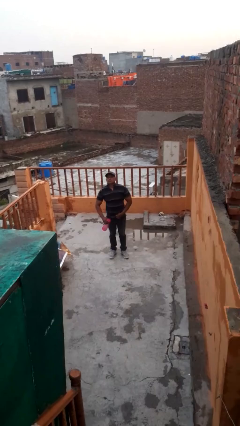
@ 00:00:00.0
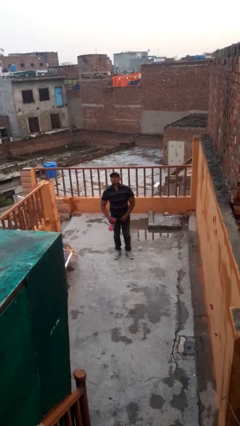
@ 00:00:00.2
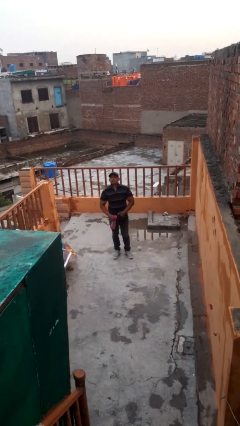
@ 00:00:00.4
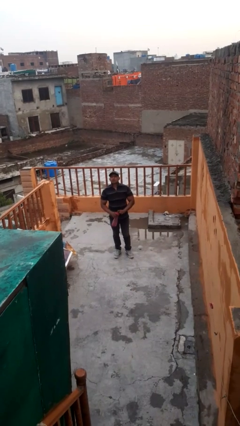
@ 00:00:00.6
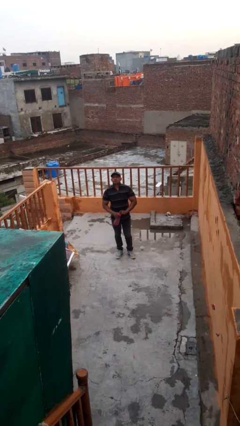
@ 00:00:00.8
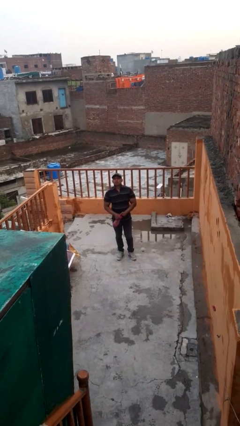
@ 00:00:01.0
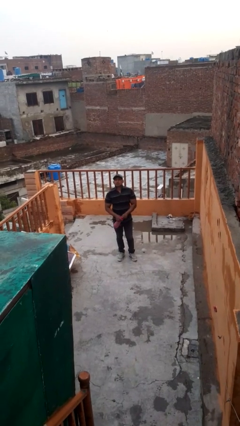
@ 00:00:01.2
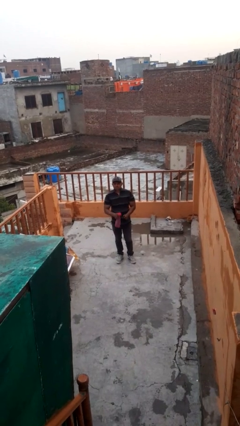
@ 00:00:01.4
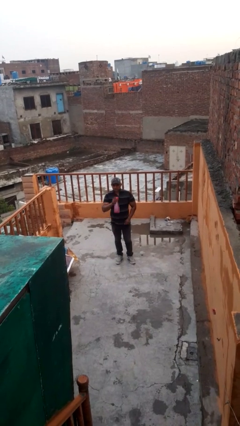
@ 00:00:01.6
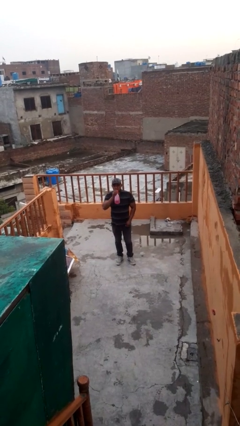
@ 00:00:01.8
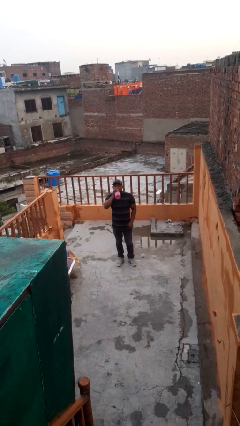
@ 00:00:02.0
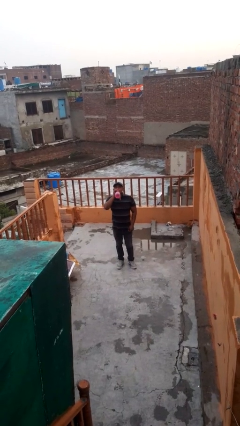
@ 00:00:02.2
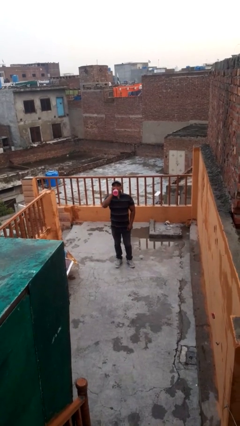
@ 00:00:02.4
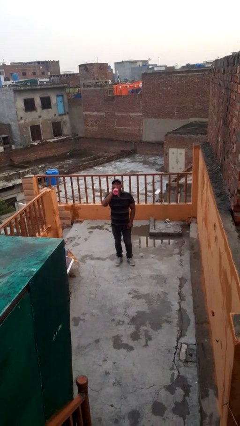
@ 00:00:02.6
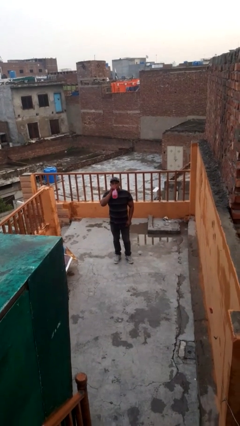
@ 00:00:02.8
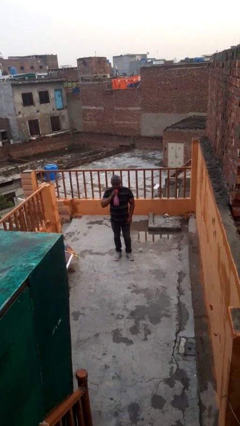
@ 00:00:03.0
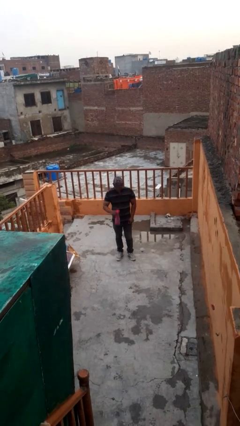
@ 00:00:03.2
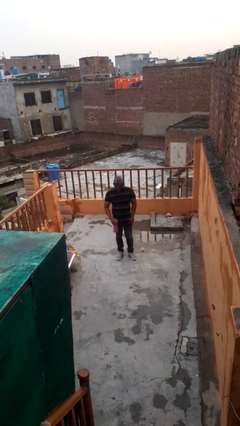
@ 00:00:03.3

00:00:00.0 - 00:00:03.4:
person drinks from bottle

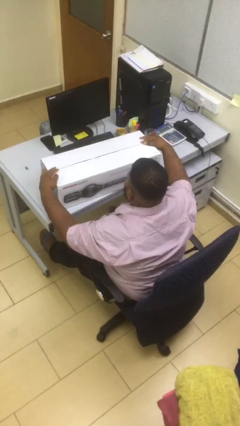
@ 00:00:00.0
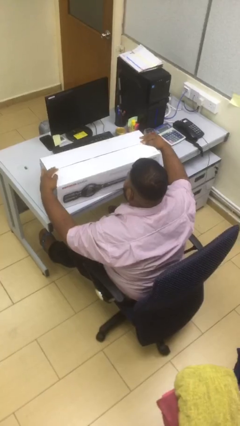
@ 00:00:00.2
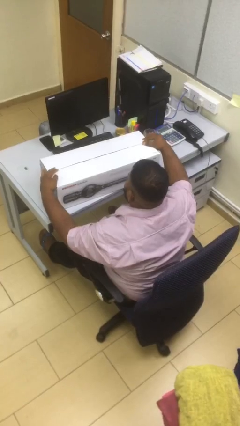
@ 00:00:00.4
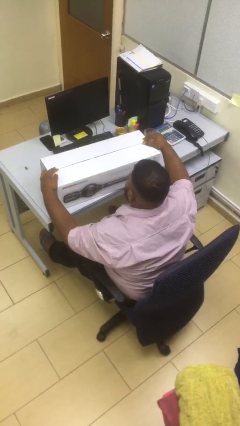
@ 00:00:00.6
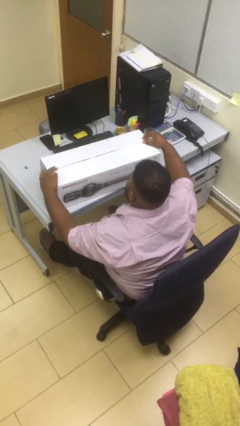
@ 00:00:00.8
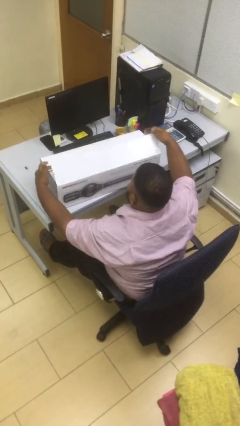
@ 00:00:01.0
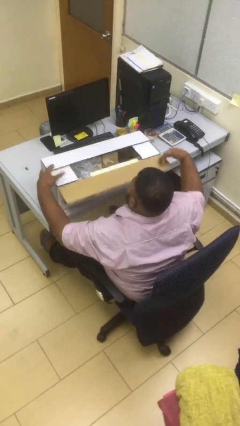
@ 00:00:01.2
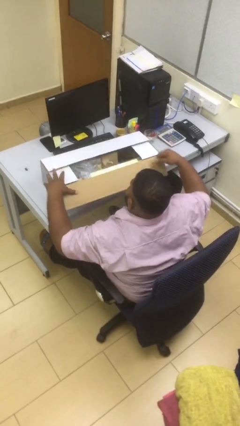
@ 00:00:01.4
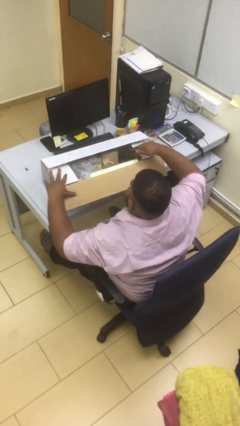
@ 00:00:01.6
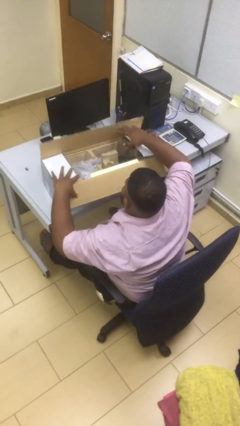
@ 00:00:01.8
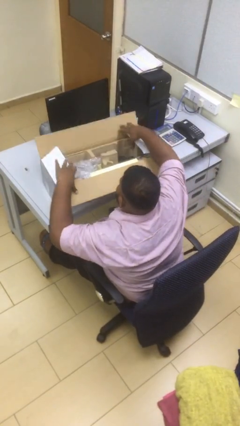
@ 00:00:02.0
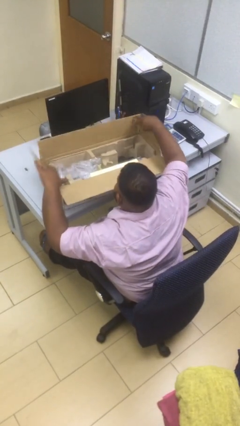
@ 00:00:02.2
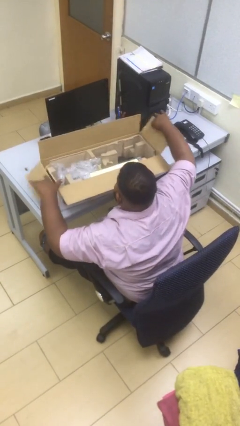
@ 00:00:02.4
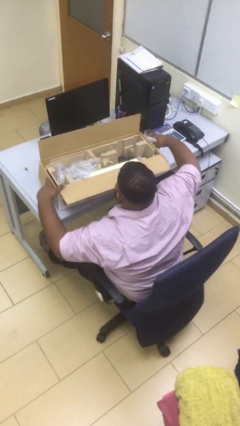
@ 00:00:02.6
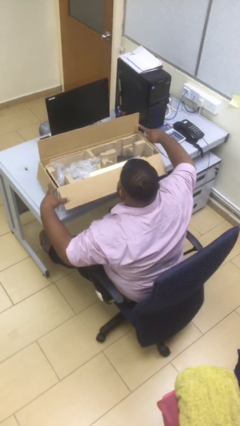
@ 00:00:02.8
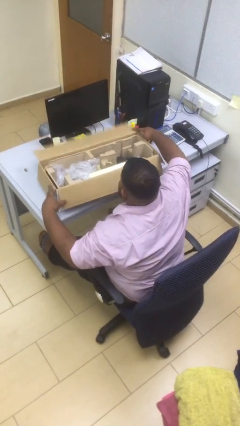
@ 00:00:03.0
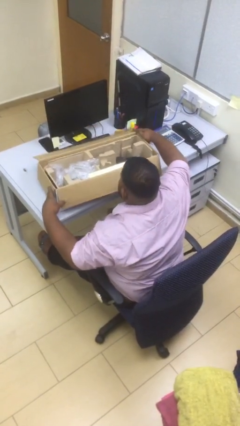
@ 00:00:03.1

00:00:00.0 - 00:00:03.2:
person opens box

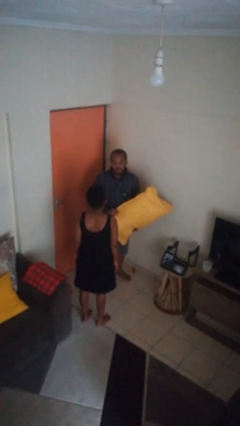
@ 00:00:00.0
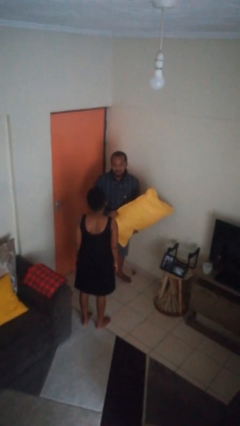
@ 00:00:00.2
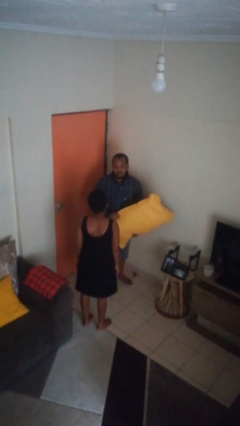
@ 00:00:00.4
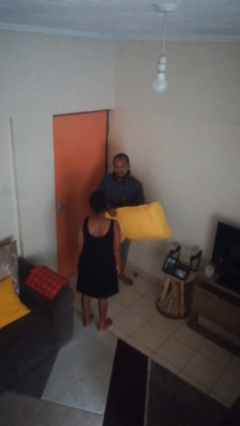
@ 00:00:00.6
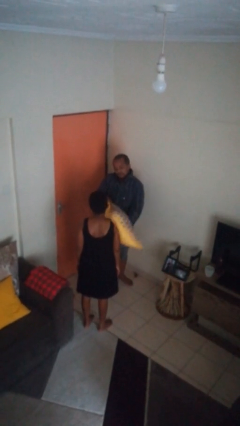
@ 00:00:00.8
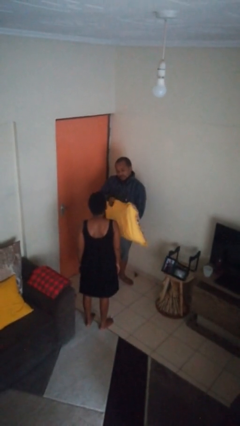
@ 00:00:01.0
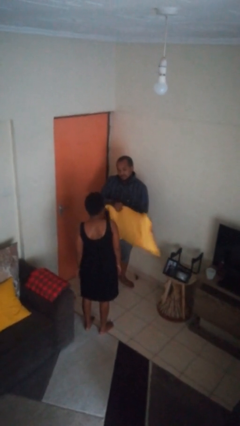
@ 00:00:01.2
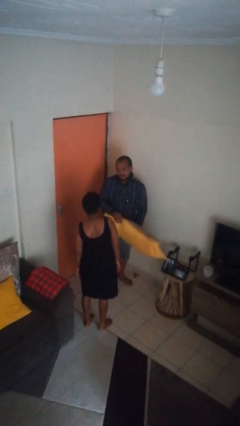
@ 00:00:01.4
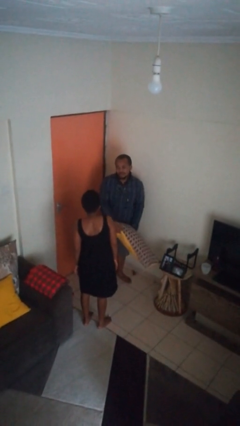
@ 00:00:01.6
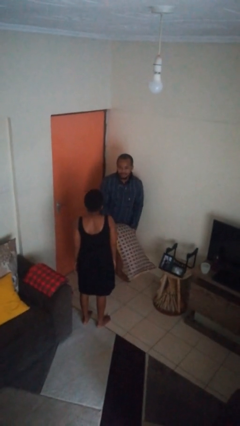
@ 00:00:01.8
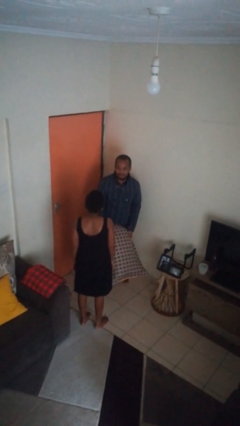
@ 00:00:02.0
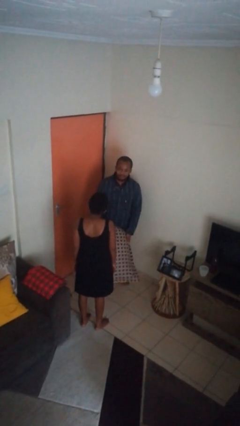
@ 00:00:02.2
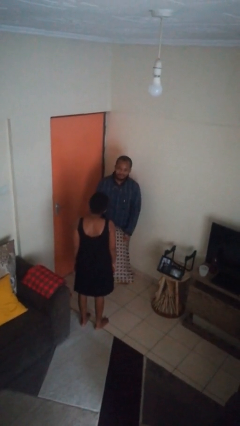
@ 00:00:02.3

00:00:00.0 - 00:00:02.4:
person hits person with pillow

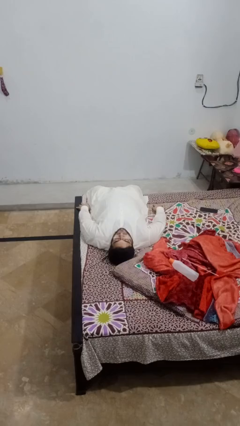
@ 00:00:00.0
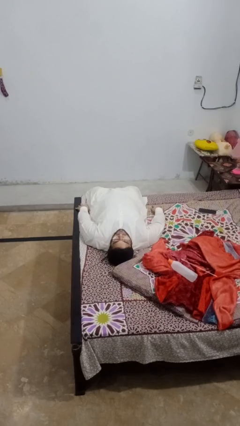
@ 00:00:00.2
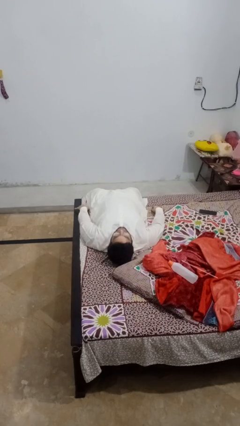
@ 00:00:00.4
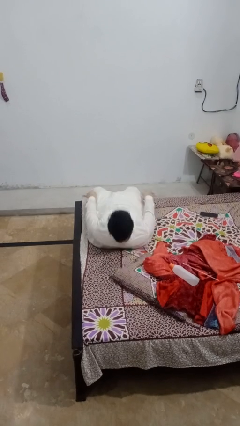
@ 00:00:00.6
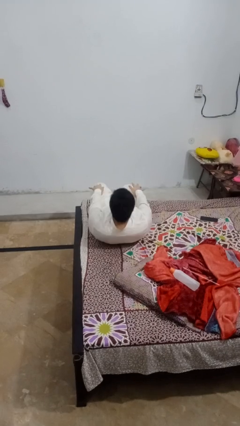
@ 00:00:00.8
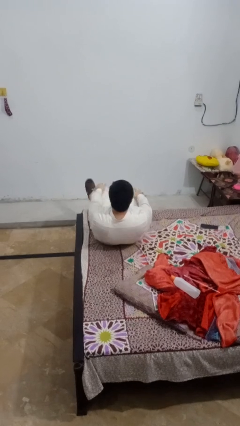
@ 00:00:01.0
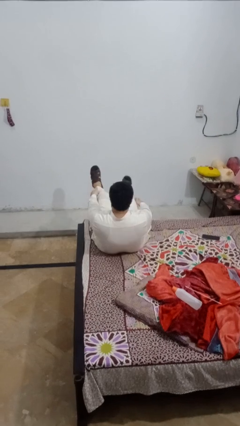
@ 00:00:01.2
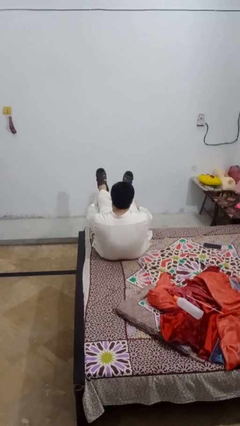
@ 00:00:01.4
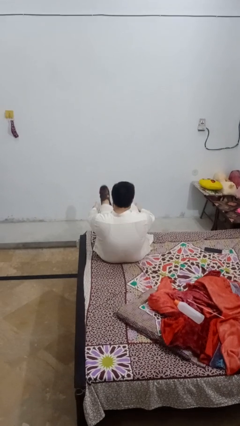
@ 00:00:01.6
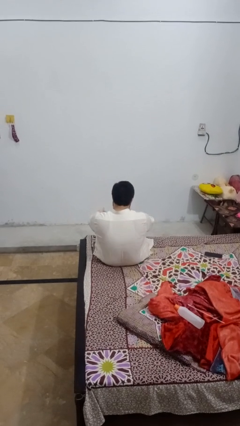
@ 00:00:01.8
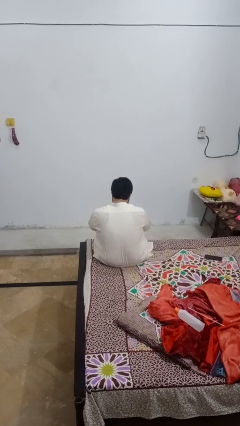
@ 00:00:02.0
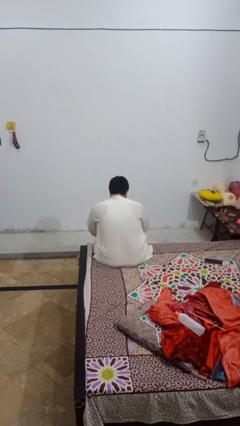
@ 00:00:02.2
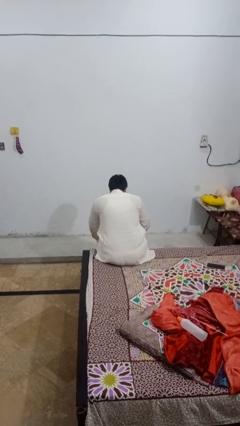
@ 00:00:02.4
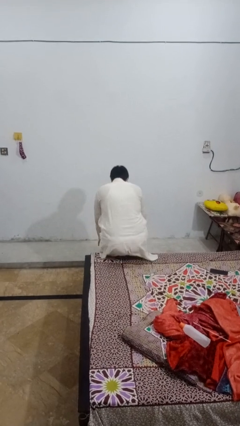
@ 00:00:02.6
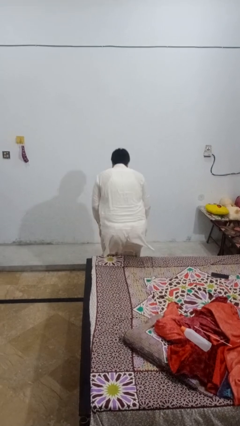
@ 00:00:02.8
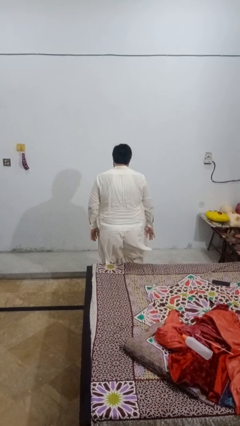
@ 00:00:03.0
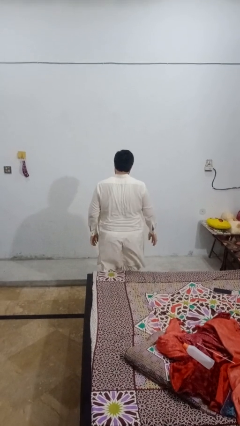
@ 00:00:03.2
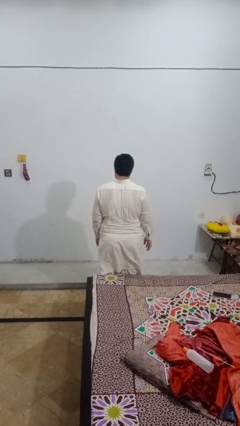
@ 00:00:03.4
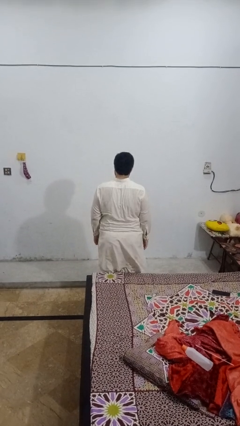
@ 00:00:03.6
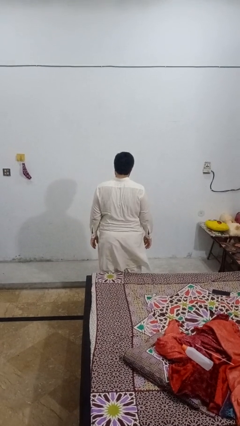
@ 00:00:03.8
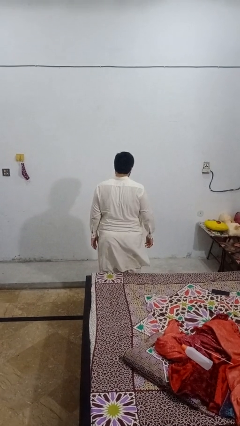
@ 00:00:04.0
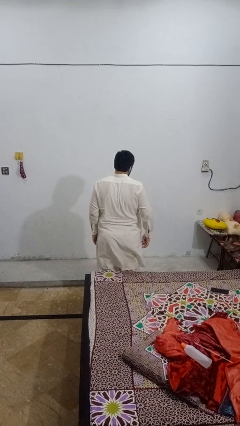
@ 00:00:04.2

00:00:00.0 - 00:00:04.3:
person stands up

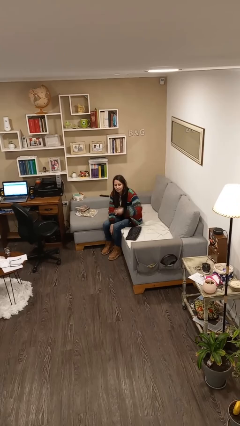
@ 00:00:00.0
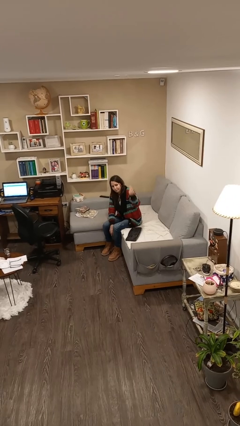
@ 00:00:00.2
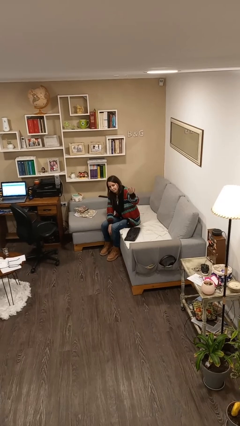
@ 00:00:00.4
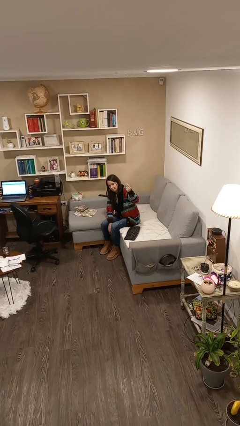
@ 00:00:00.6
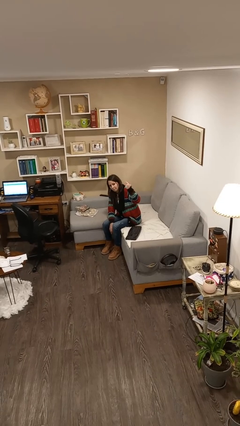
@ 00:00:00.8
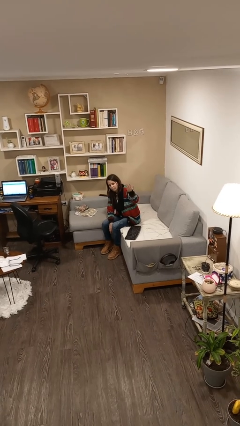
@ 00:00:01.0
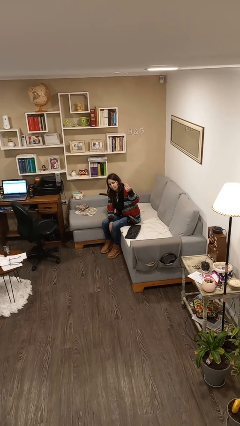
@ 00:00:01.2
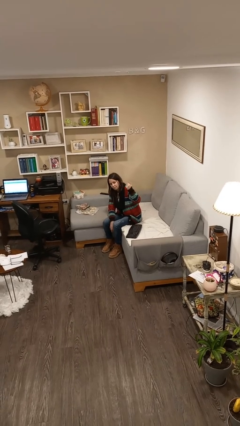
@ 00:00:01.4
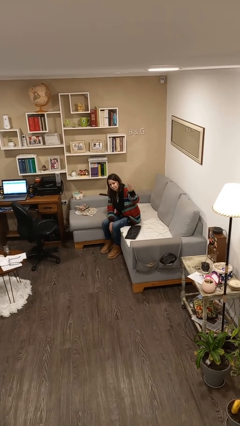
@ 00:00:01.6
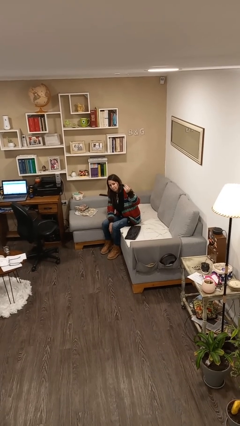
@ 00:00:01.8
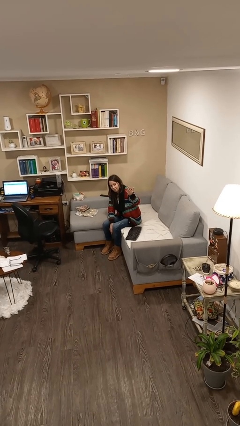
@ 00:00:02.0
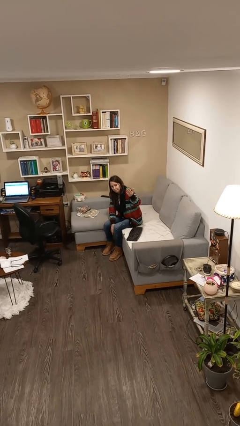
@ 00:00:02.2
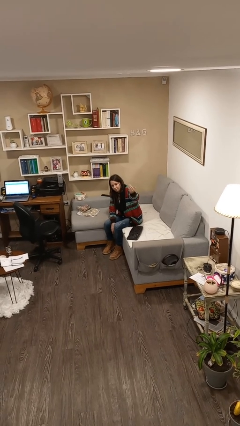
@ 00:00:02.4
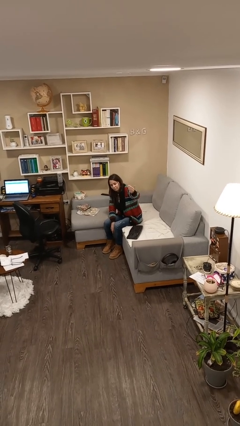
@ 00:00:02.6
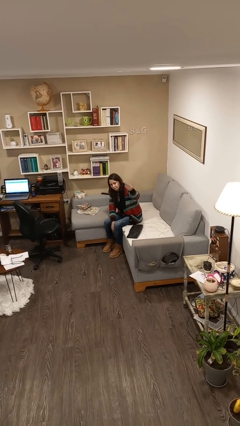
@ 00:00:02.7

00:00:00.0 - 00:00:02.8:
person gestures come here

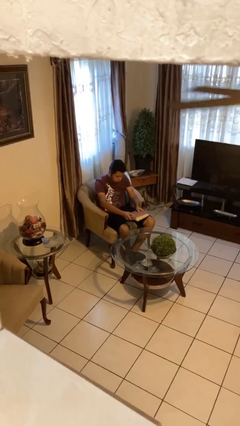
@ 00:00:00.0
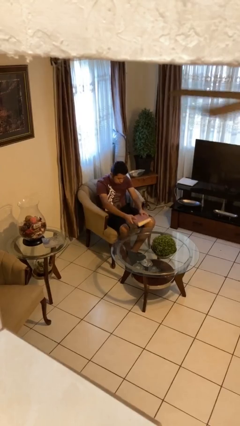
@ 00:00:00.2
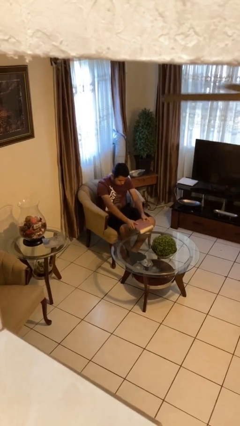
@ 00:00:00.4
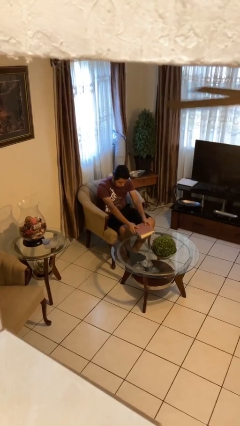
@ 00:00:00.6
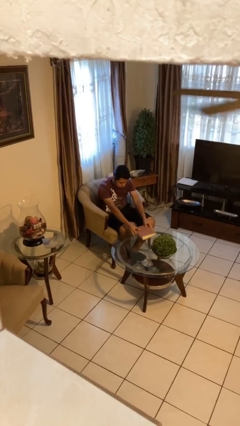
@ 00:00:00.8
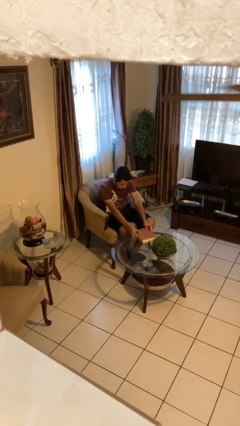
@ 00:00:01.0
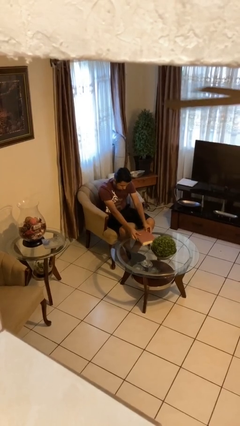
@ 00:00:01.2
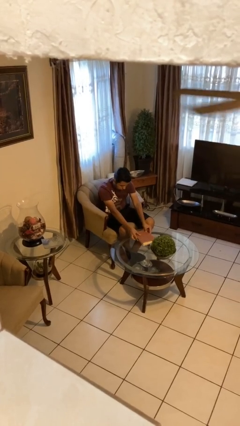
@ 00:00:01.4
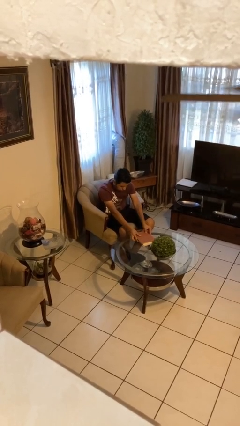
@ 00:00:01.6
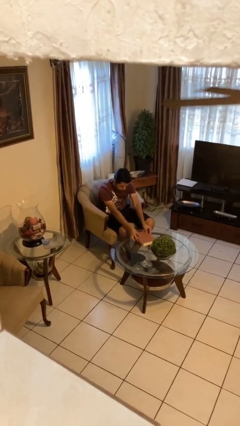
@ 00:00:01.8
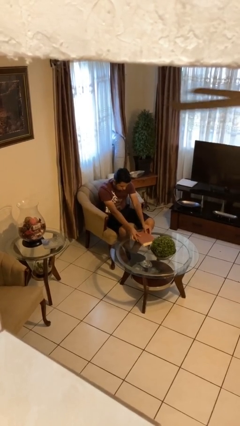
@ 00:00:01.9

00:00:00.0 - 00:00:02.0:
person puts down object on table
